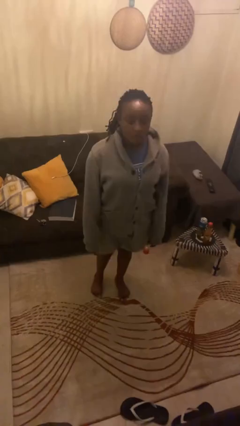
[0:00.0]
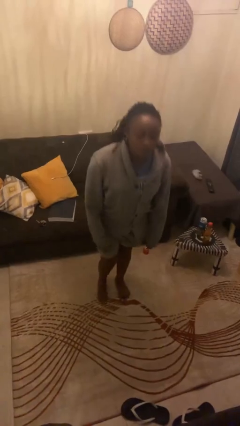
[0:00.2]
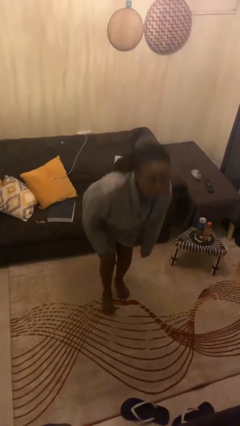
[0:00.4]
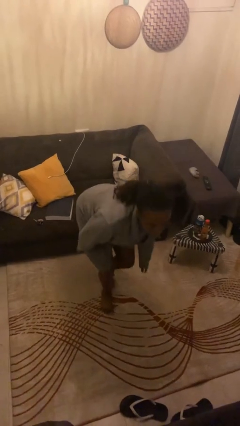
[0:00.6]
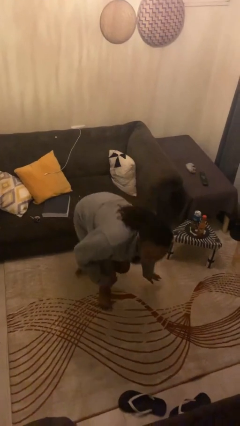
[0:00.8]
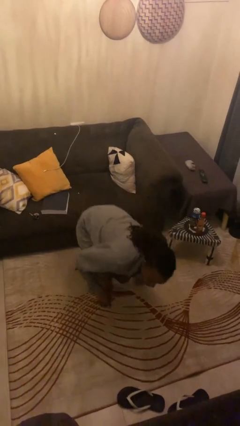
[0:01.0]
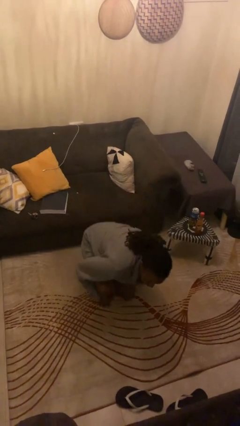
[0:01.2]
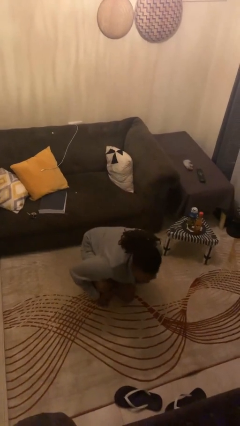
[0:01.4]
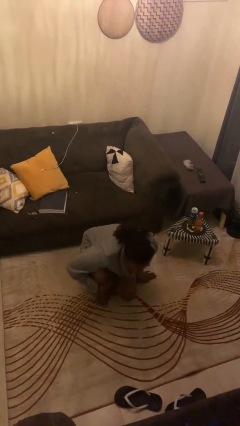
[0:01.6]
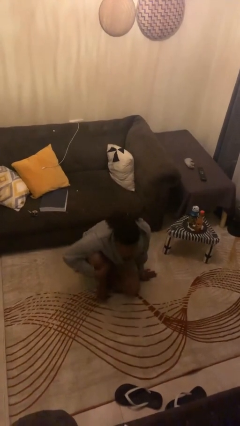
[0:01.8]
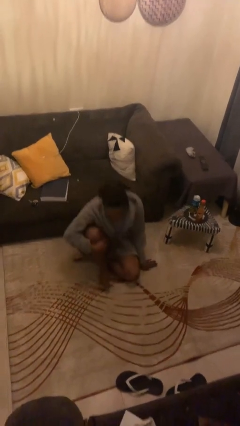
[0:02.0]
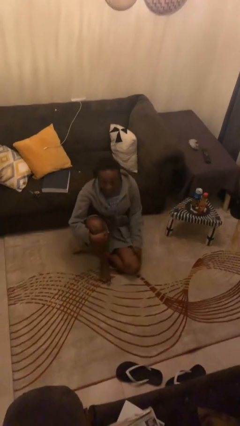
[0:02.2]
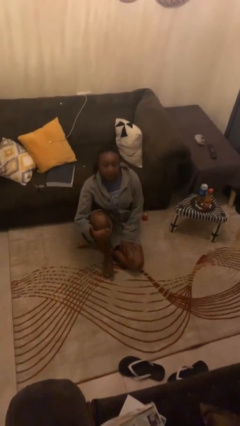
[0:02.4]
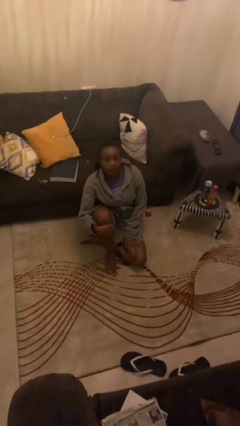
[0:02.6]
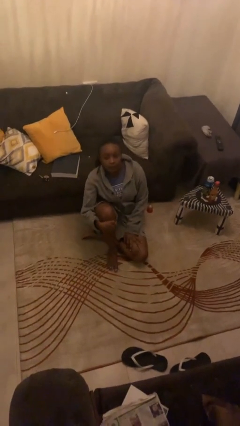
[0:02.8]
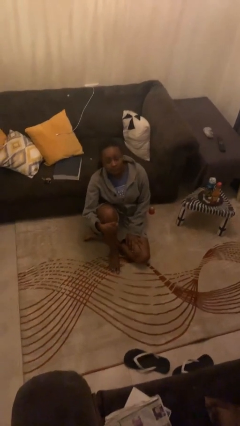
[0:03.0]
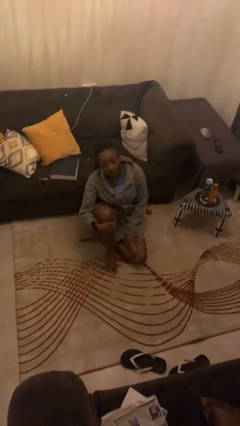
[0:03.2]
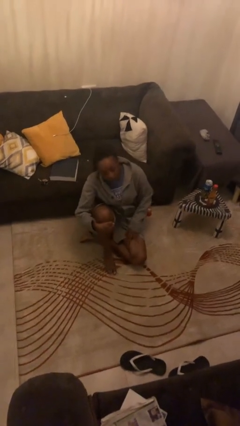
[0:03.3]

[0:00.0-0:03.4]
person sits crisscross

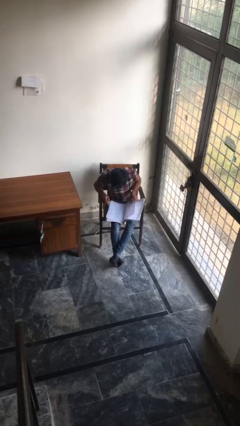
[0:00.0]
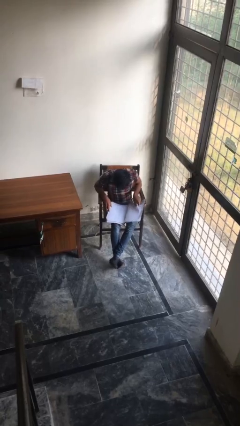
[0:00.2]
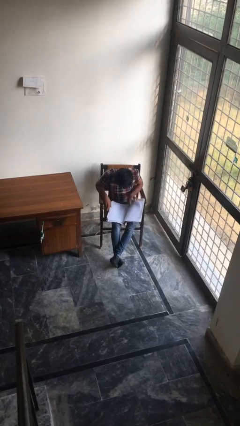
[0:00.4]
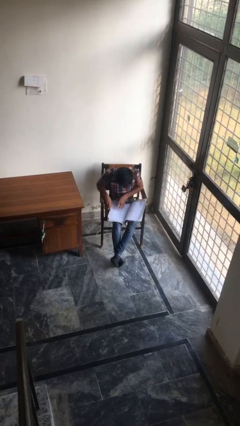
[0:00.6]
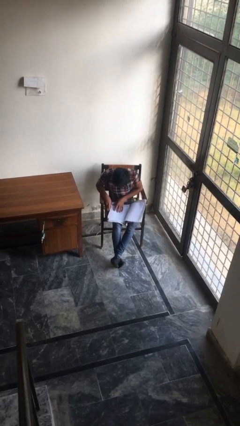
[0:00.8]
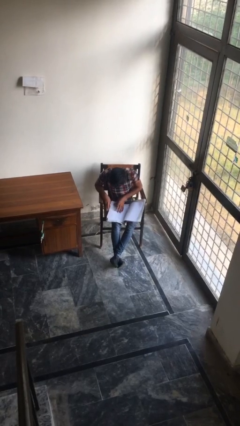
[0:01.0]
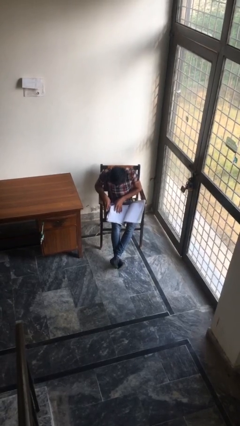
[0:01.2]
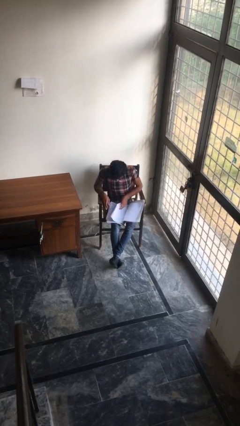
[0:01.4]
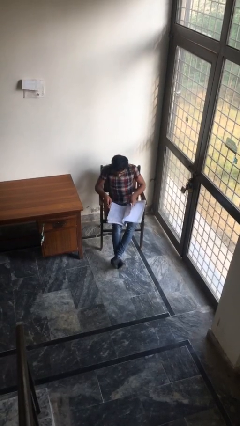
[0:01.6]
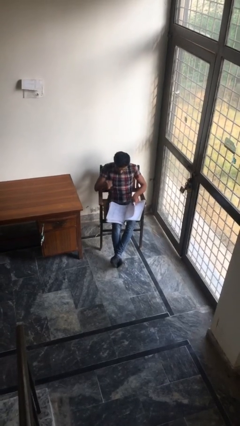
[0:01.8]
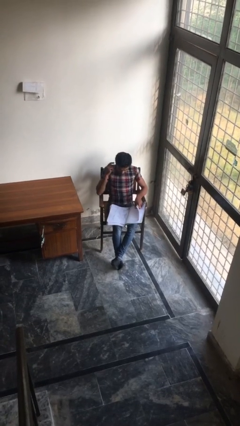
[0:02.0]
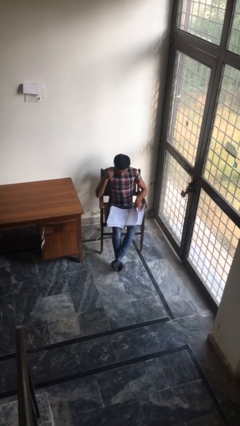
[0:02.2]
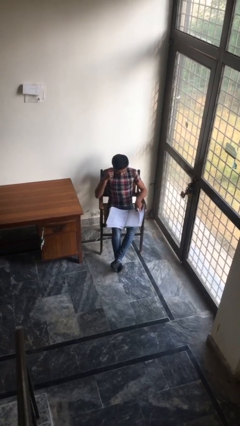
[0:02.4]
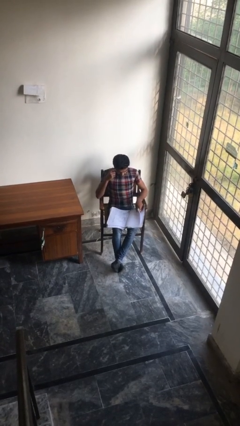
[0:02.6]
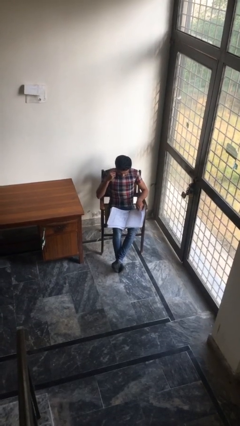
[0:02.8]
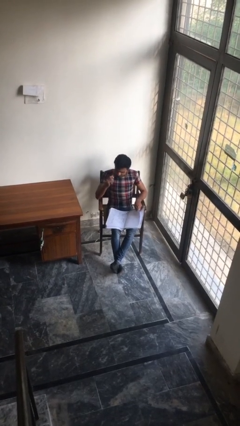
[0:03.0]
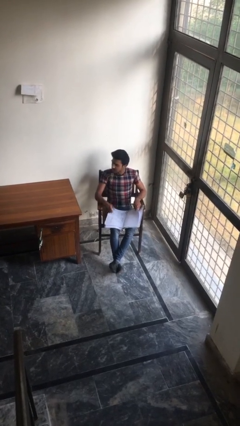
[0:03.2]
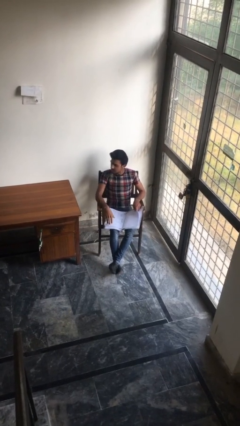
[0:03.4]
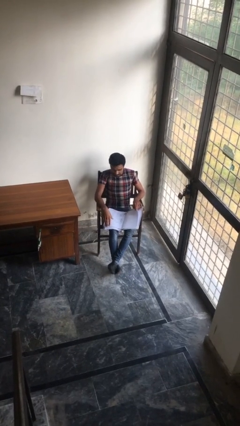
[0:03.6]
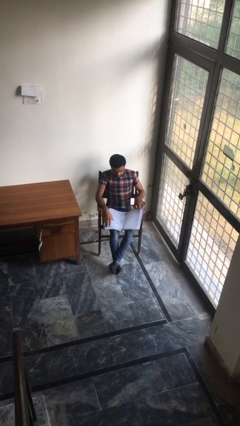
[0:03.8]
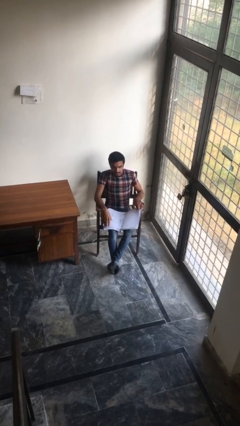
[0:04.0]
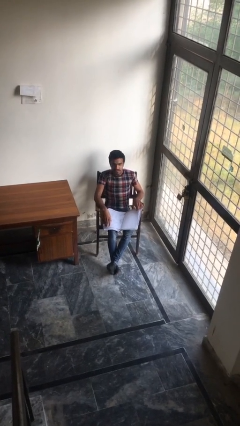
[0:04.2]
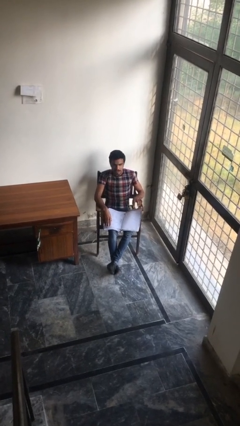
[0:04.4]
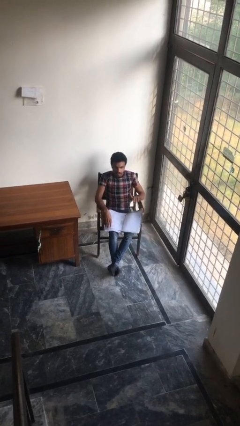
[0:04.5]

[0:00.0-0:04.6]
person reads document

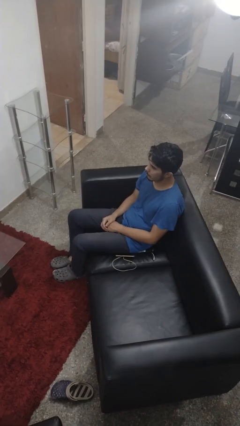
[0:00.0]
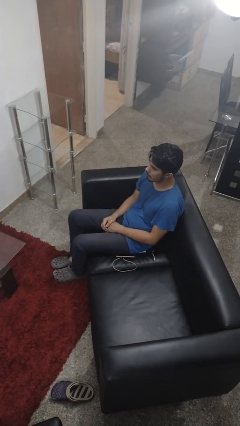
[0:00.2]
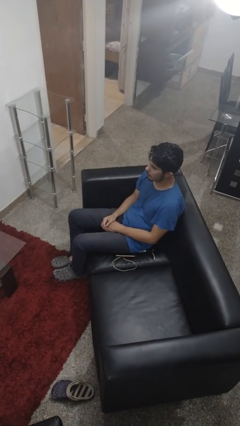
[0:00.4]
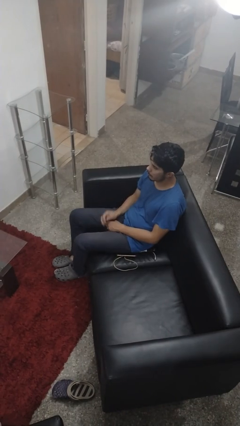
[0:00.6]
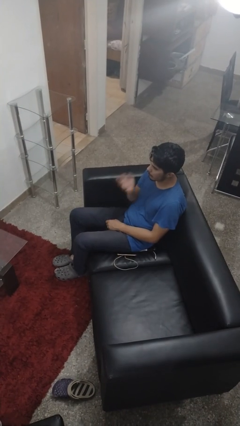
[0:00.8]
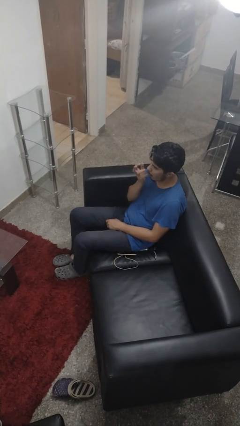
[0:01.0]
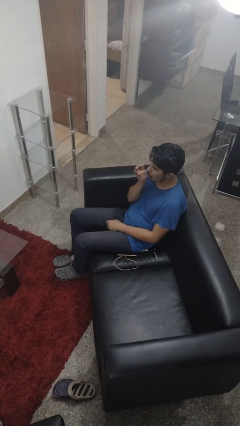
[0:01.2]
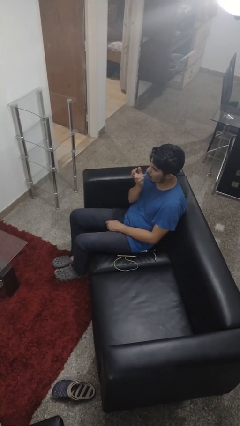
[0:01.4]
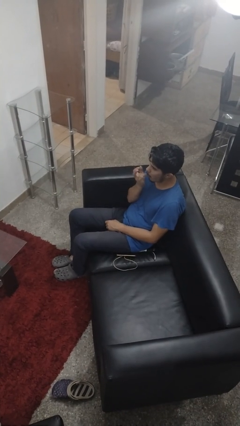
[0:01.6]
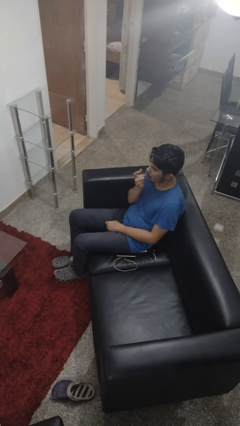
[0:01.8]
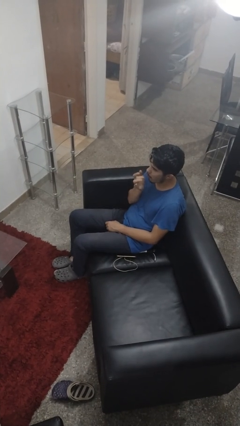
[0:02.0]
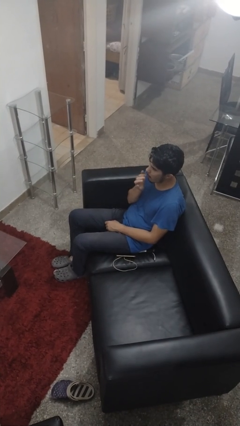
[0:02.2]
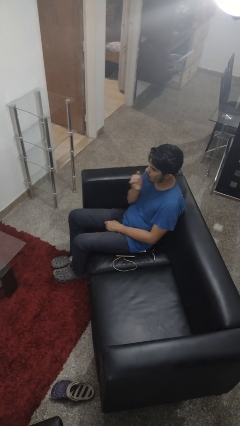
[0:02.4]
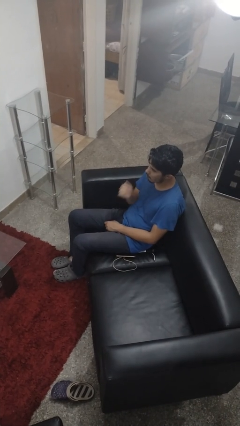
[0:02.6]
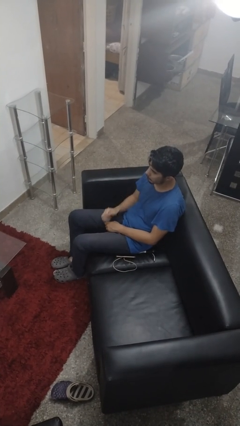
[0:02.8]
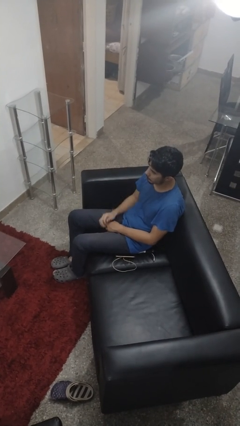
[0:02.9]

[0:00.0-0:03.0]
person licks fingers

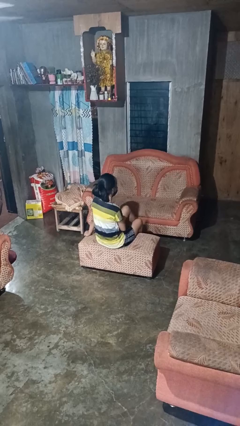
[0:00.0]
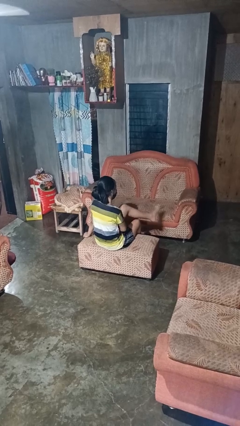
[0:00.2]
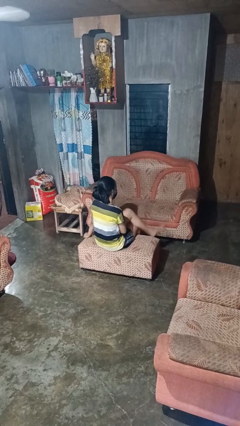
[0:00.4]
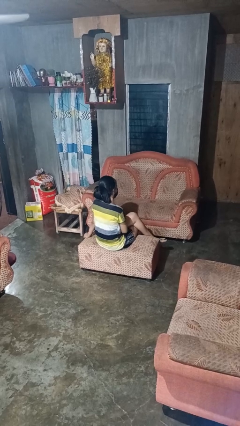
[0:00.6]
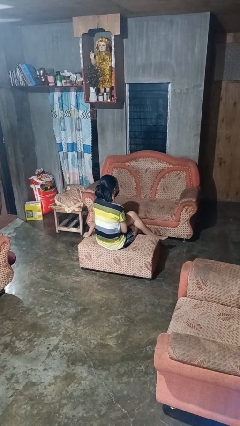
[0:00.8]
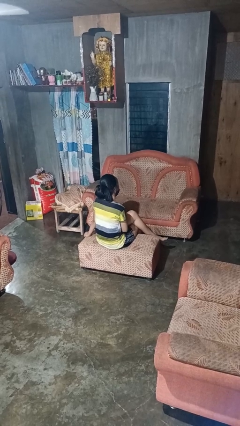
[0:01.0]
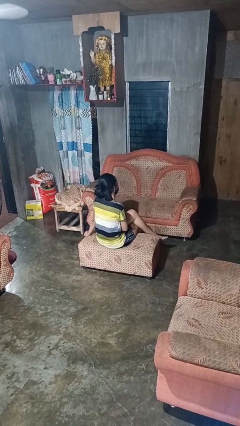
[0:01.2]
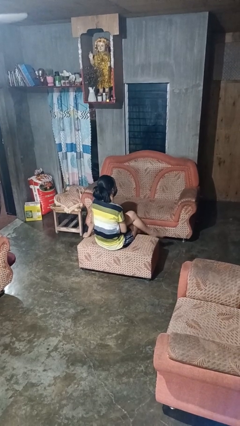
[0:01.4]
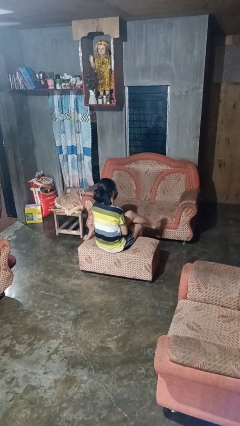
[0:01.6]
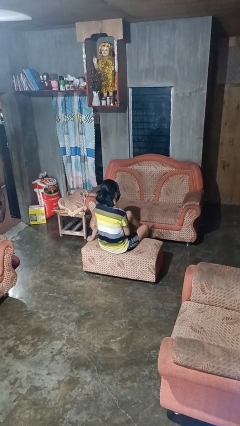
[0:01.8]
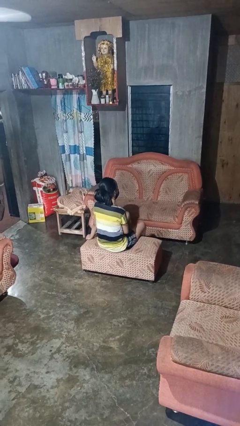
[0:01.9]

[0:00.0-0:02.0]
person crosses legs

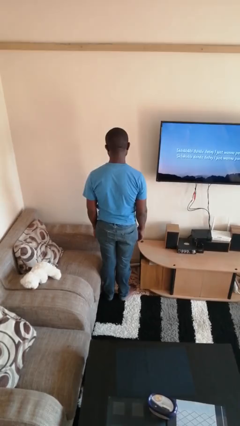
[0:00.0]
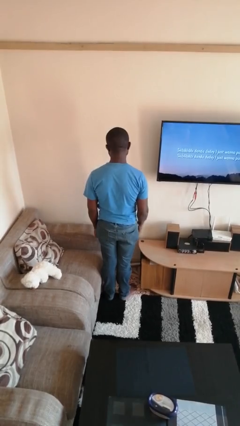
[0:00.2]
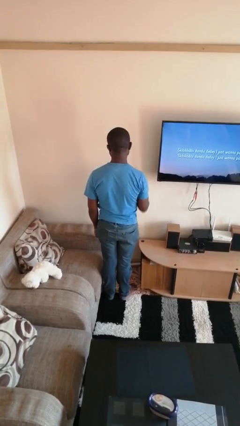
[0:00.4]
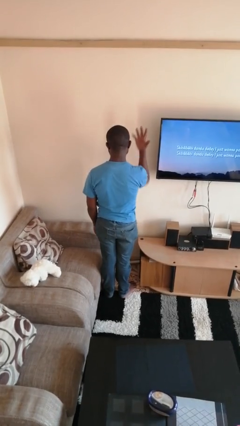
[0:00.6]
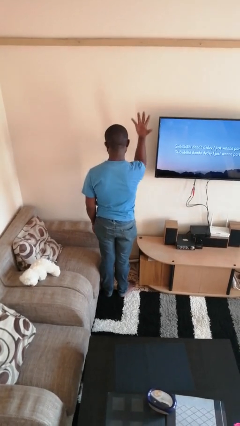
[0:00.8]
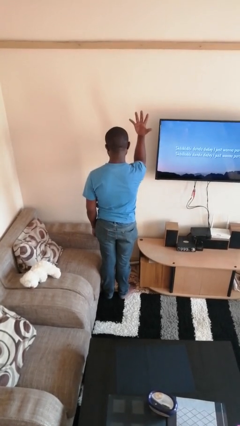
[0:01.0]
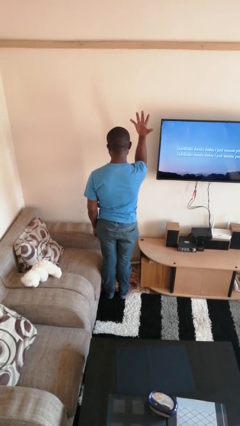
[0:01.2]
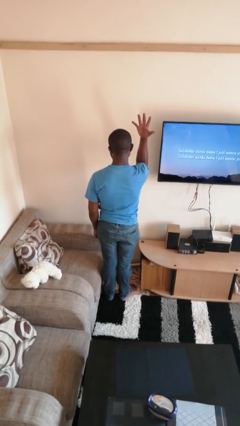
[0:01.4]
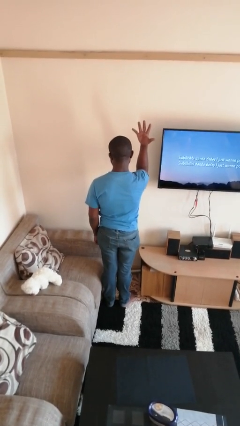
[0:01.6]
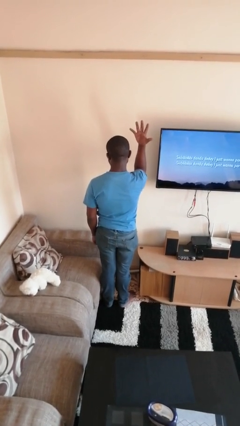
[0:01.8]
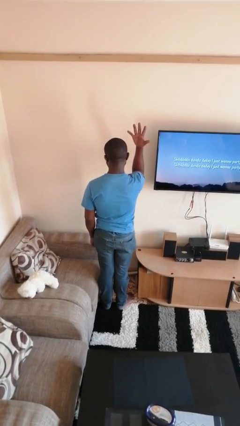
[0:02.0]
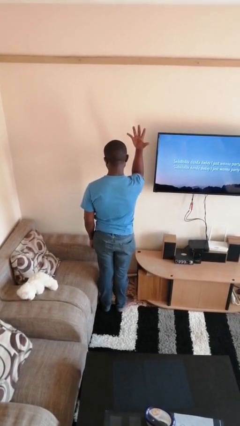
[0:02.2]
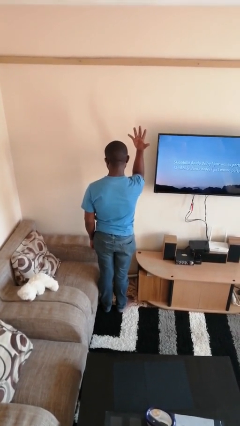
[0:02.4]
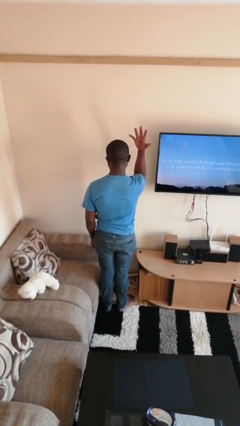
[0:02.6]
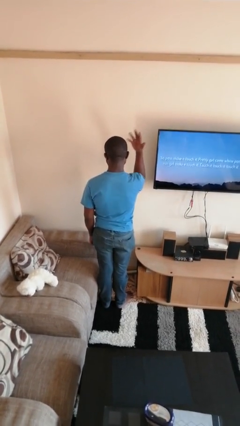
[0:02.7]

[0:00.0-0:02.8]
person gestures number five

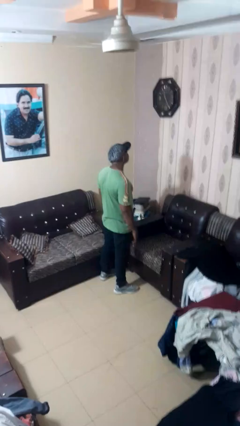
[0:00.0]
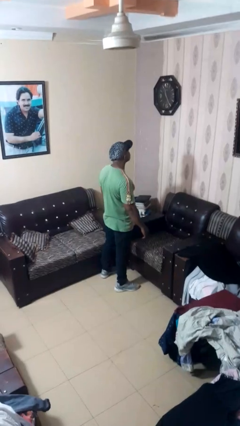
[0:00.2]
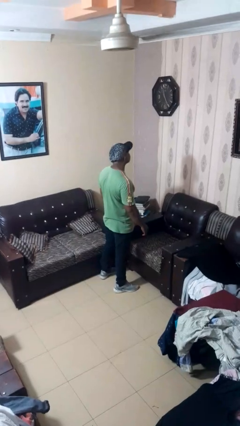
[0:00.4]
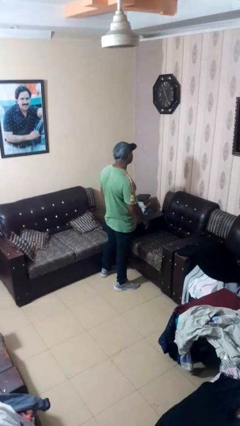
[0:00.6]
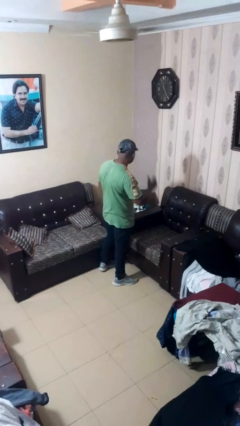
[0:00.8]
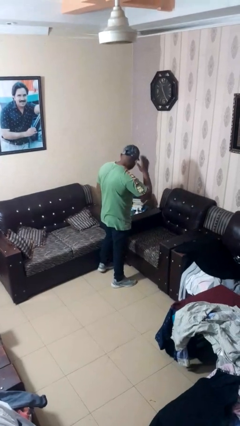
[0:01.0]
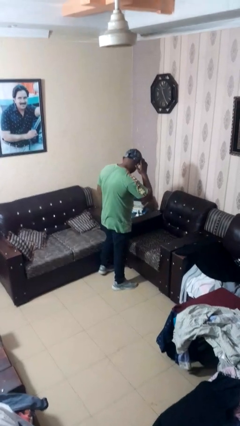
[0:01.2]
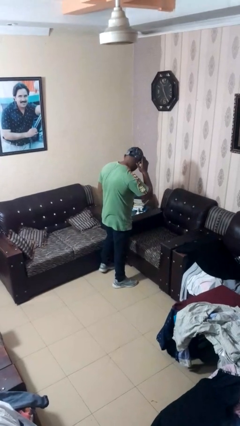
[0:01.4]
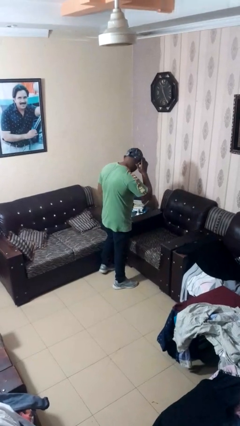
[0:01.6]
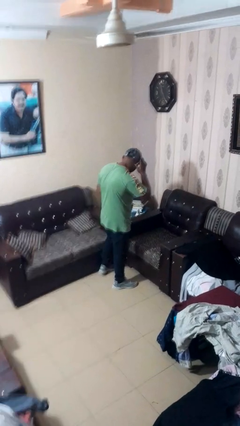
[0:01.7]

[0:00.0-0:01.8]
person gestures listen closely
